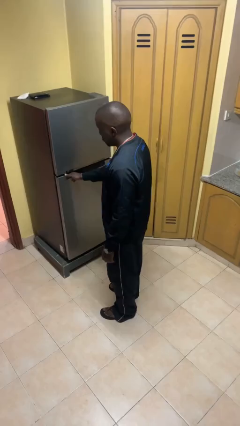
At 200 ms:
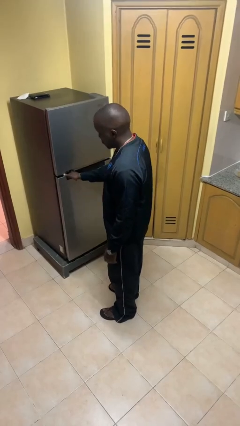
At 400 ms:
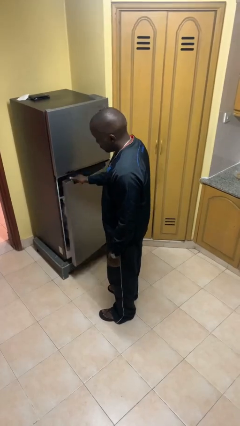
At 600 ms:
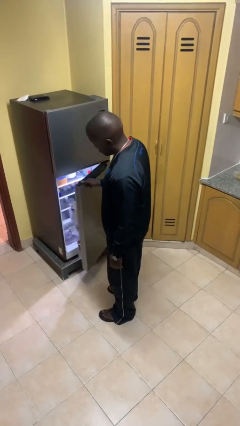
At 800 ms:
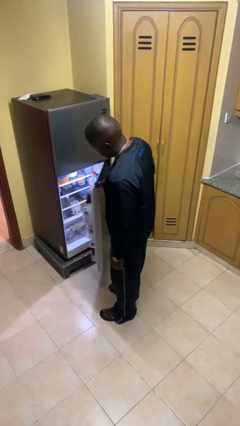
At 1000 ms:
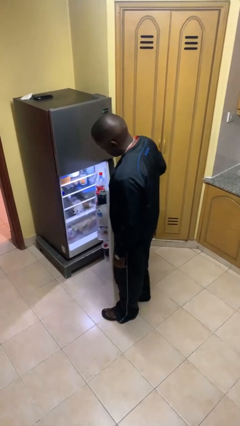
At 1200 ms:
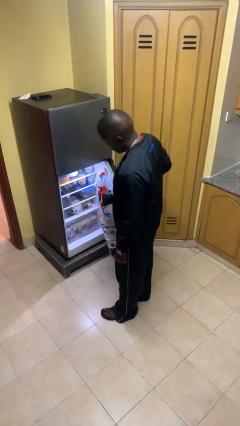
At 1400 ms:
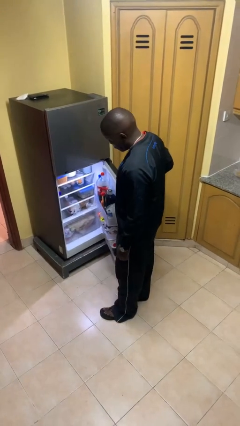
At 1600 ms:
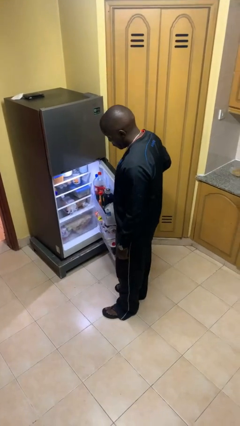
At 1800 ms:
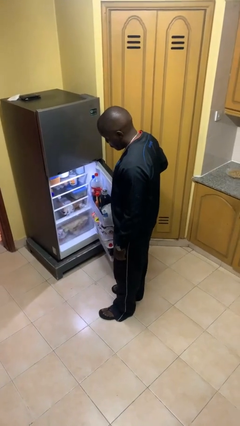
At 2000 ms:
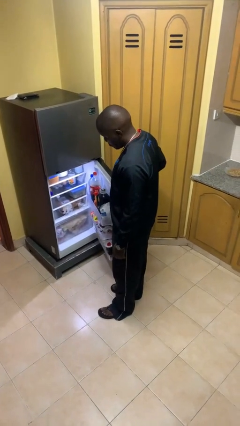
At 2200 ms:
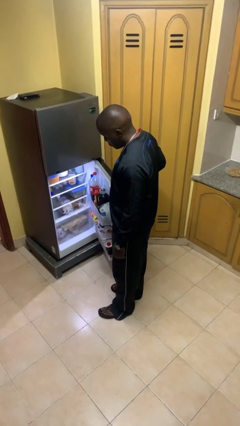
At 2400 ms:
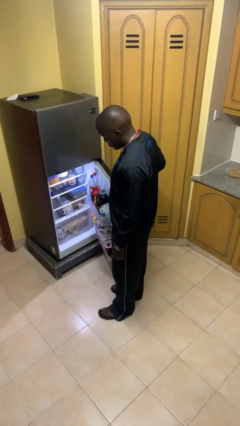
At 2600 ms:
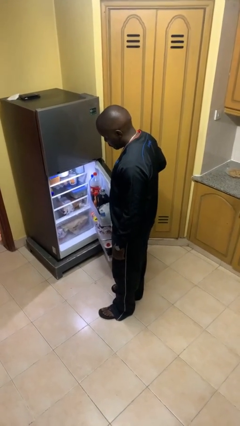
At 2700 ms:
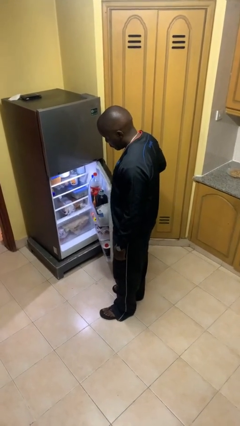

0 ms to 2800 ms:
person opens refrigerator

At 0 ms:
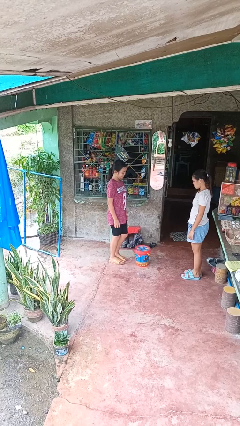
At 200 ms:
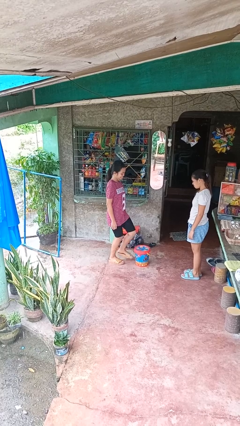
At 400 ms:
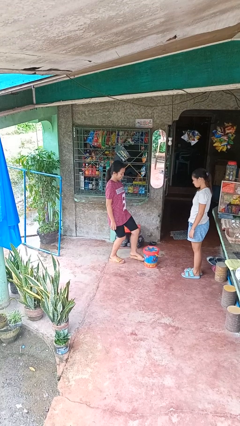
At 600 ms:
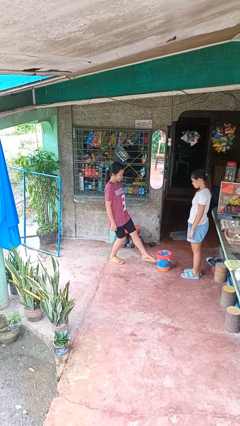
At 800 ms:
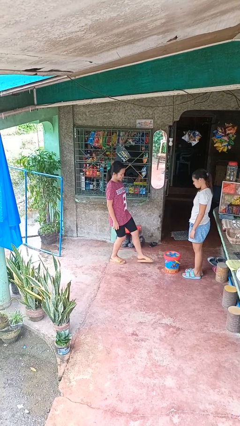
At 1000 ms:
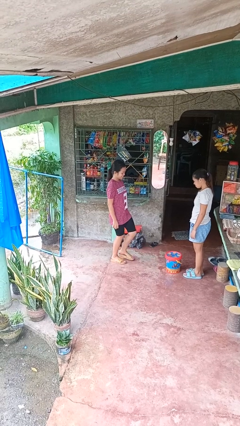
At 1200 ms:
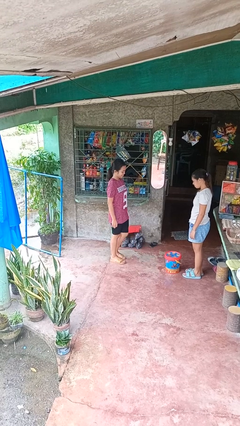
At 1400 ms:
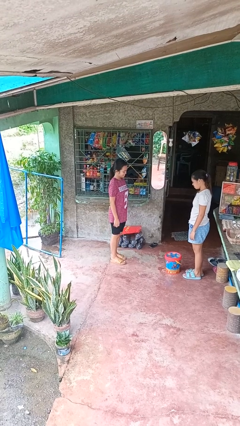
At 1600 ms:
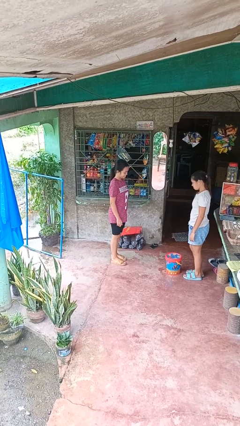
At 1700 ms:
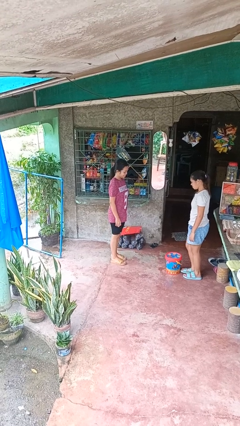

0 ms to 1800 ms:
person kicks object to person

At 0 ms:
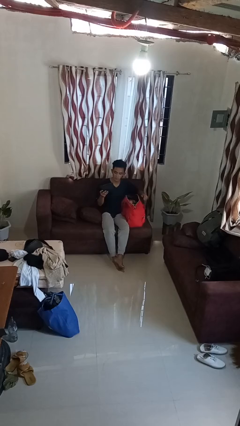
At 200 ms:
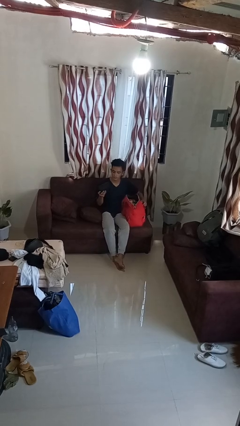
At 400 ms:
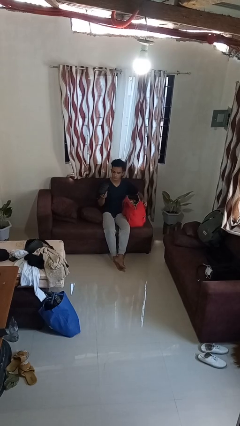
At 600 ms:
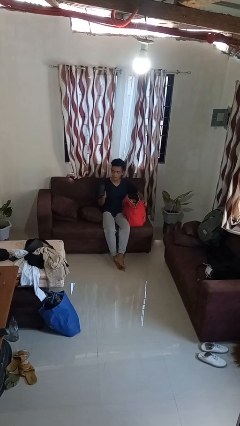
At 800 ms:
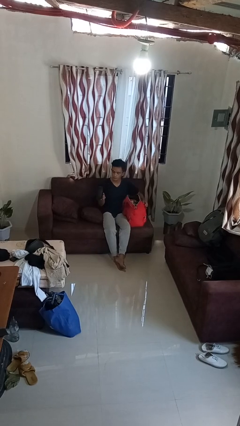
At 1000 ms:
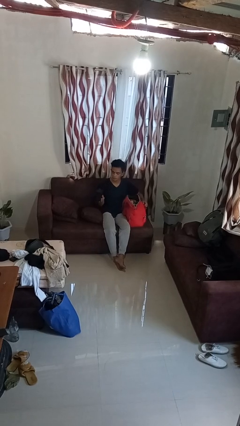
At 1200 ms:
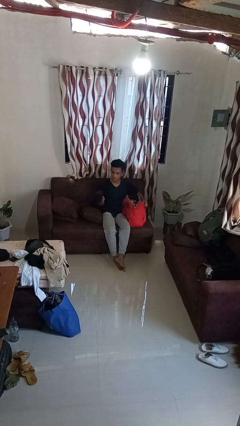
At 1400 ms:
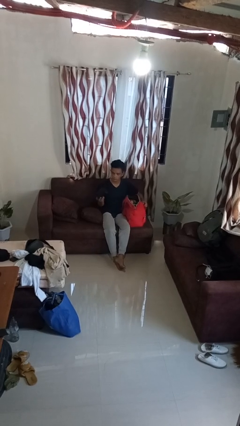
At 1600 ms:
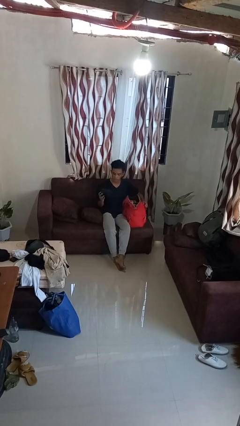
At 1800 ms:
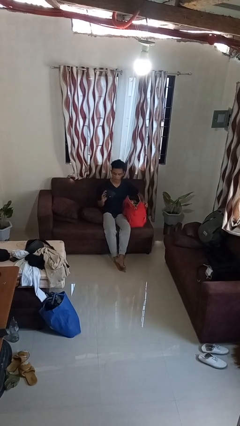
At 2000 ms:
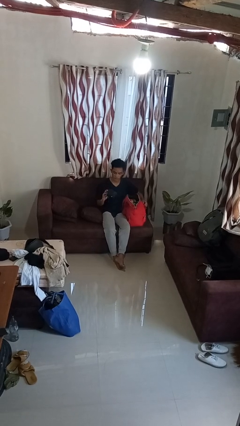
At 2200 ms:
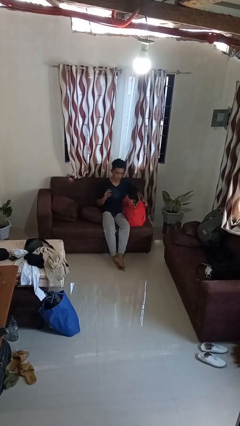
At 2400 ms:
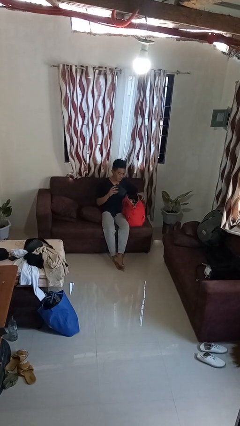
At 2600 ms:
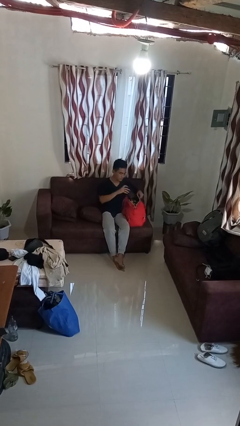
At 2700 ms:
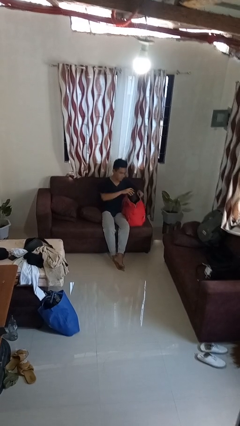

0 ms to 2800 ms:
person takes object from backpack

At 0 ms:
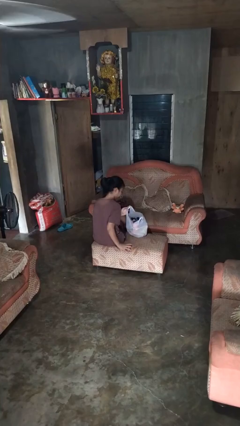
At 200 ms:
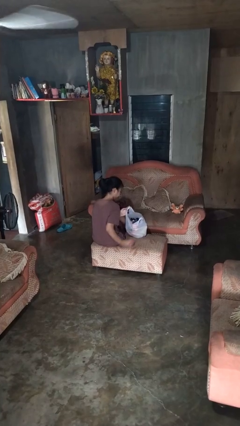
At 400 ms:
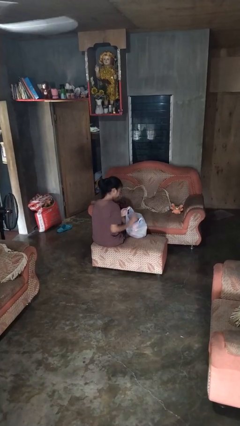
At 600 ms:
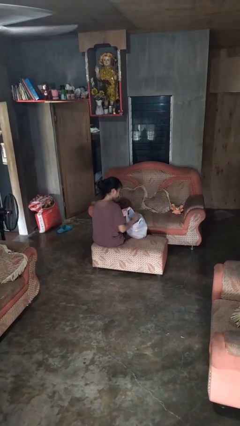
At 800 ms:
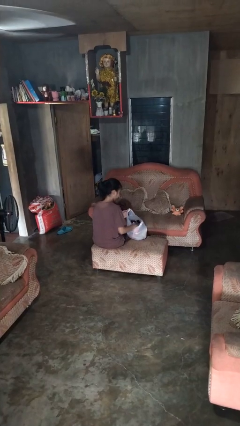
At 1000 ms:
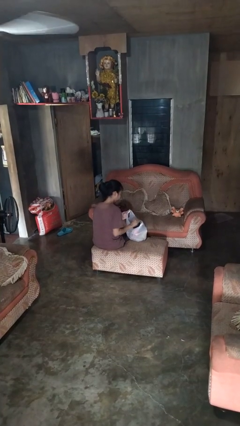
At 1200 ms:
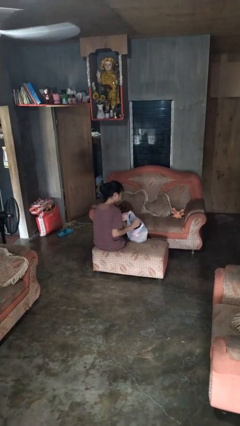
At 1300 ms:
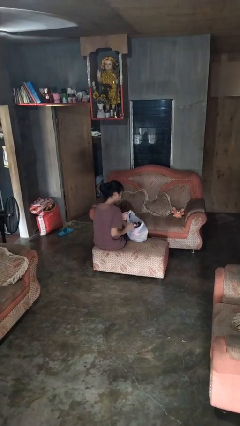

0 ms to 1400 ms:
person puts object into bag

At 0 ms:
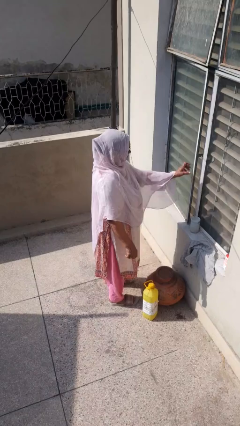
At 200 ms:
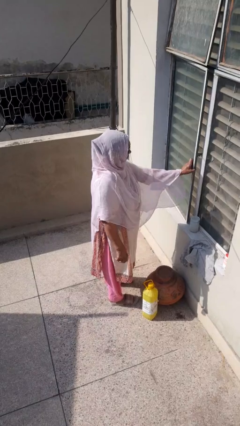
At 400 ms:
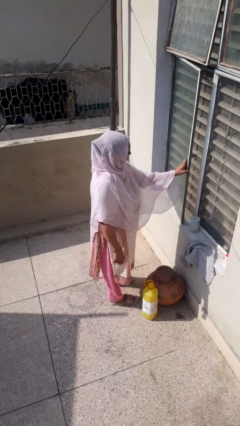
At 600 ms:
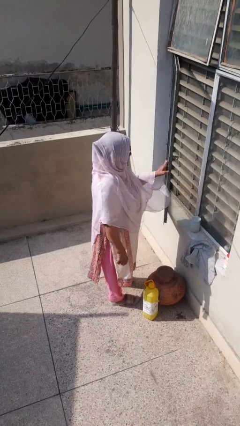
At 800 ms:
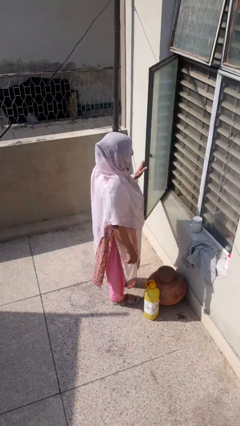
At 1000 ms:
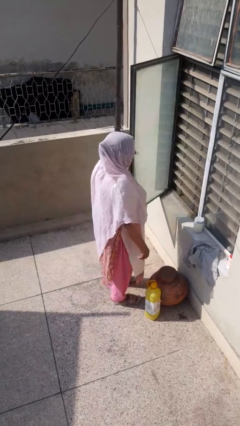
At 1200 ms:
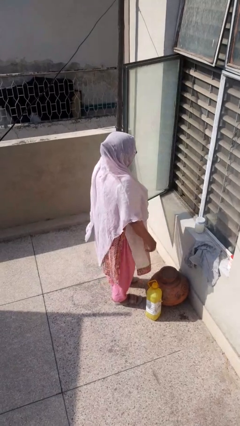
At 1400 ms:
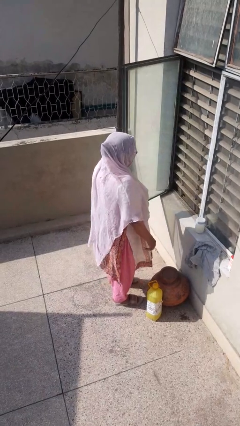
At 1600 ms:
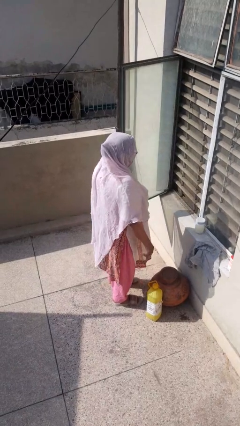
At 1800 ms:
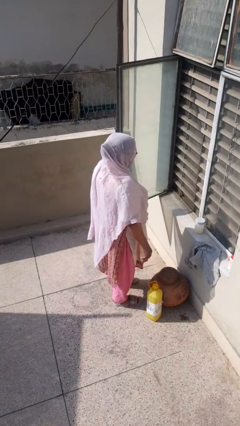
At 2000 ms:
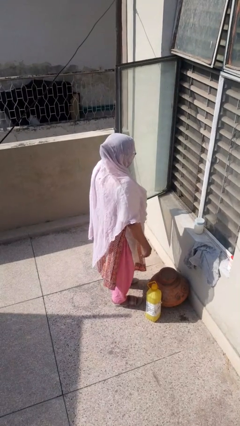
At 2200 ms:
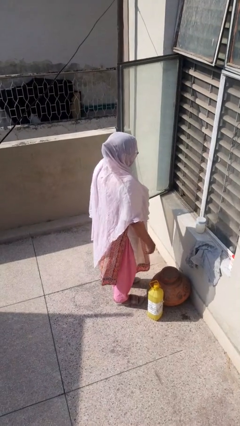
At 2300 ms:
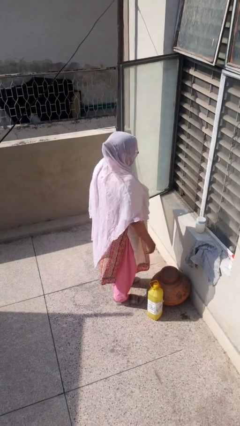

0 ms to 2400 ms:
person opens home window

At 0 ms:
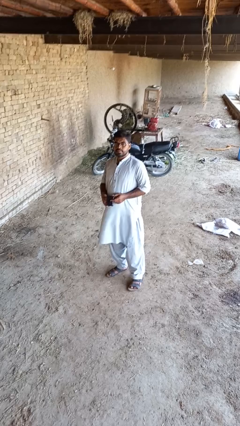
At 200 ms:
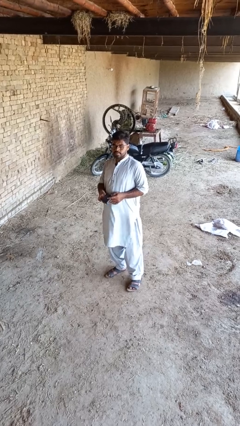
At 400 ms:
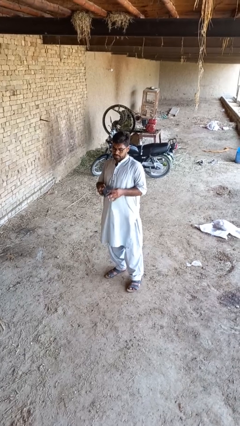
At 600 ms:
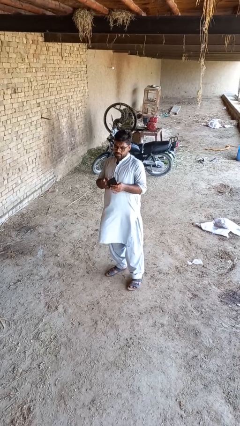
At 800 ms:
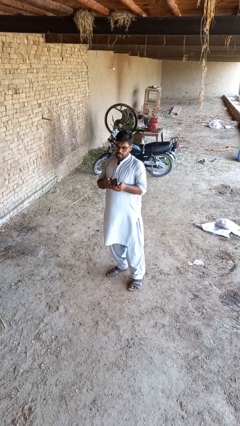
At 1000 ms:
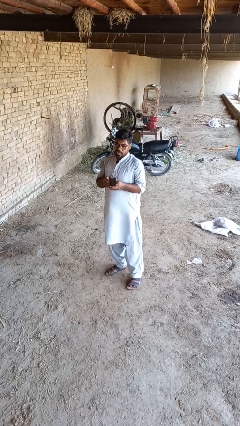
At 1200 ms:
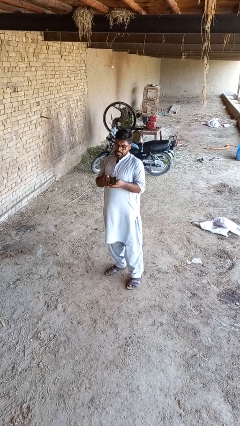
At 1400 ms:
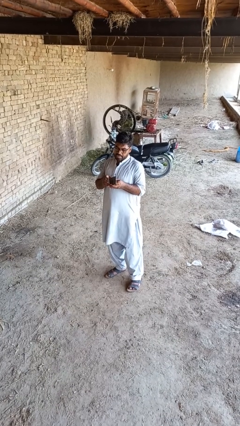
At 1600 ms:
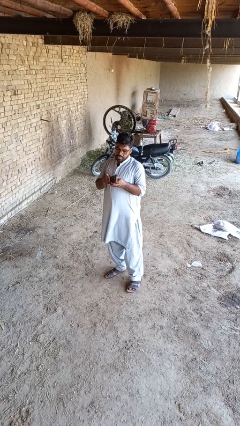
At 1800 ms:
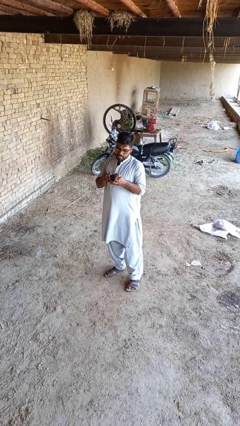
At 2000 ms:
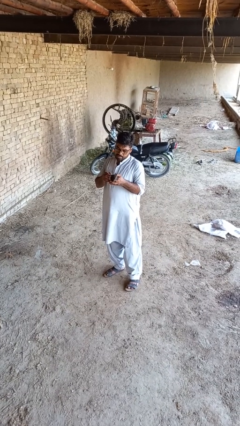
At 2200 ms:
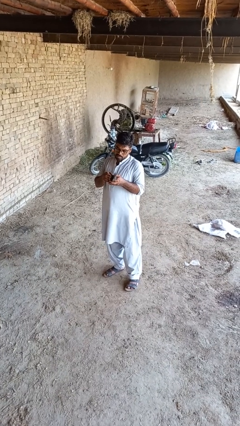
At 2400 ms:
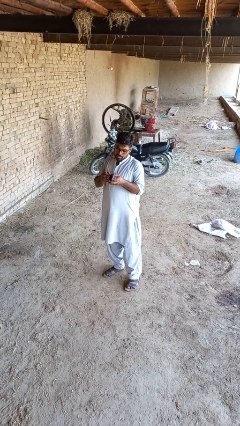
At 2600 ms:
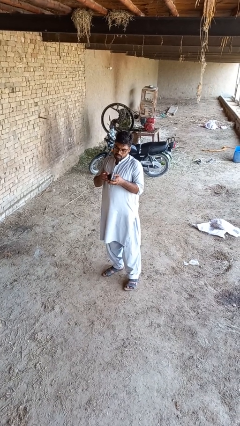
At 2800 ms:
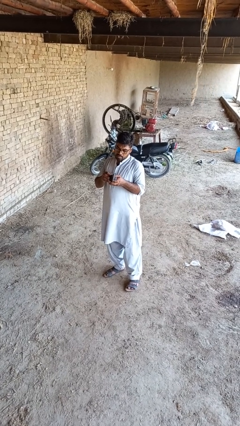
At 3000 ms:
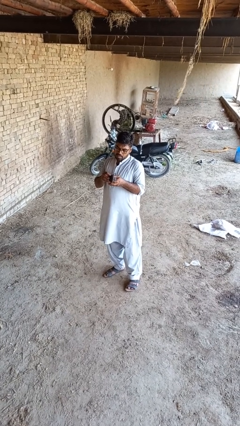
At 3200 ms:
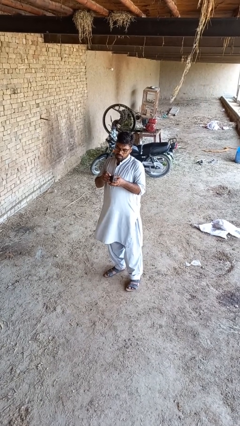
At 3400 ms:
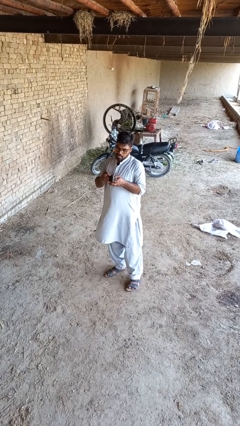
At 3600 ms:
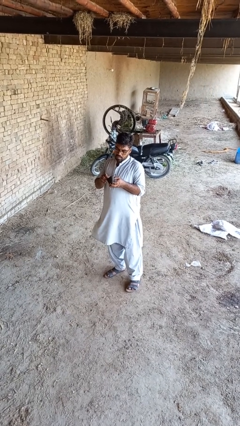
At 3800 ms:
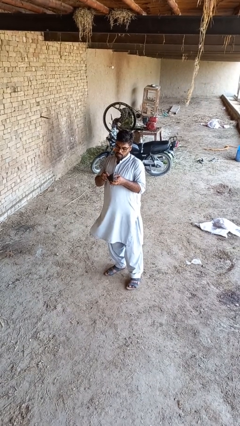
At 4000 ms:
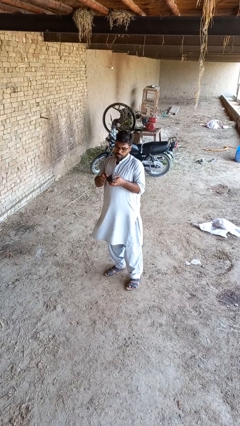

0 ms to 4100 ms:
person searches in purse

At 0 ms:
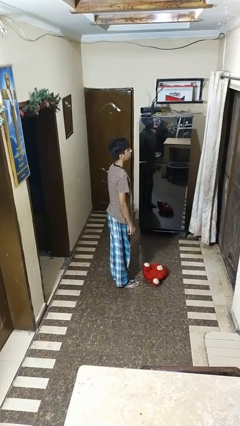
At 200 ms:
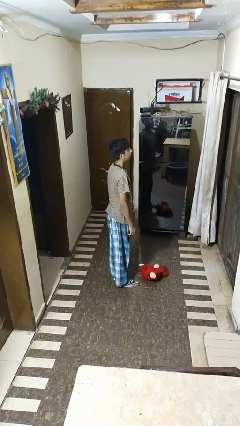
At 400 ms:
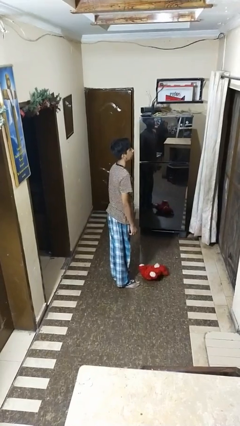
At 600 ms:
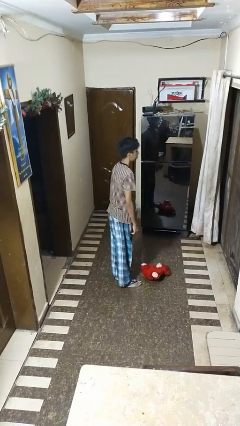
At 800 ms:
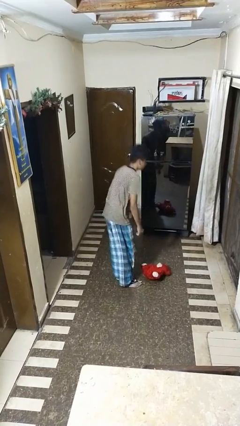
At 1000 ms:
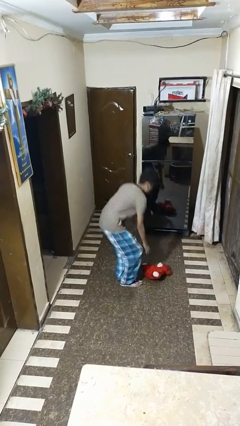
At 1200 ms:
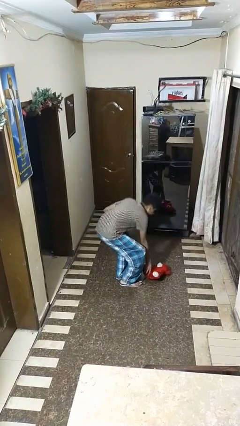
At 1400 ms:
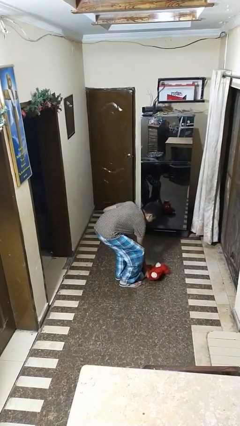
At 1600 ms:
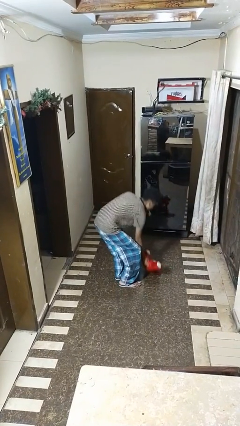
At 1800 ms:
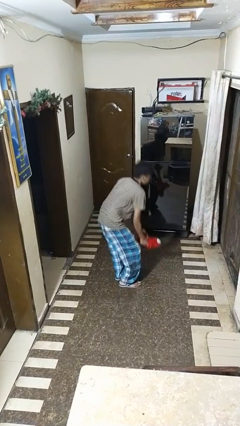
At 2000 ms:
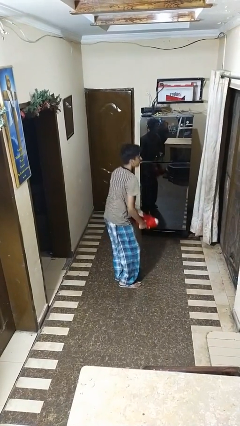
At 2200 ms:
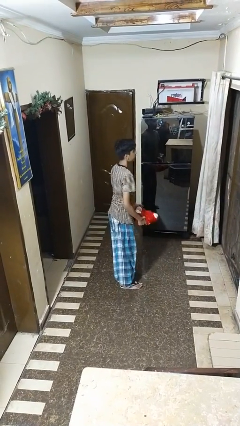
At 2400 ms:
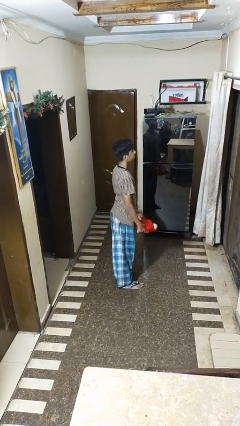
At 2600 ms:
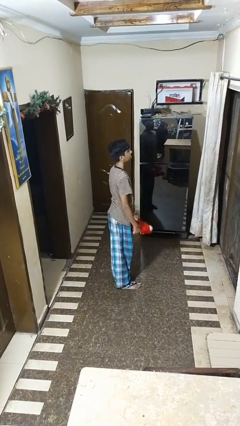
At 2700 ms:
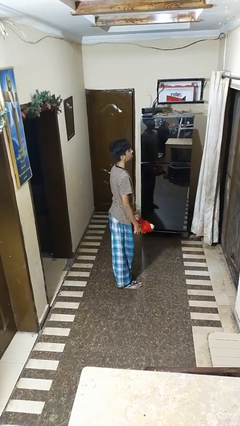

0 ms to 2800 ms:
person picks up object from floor
